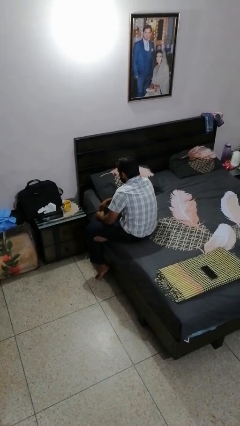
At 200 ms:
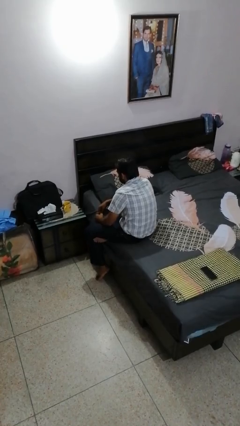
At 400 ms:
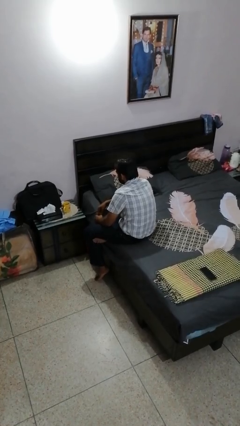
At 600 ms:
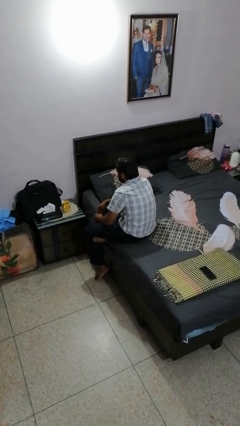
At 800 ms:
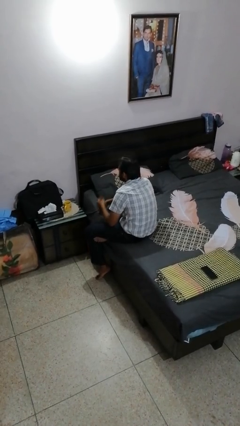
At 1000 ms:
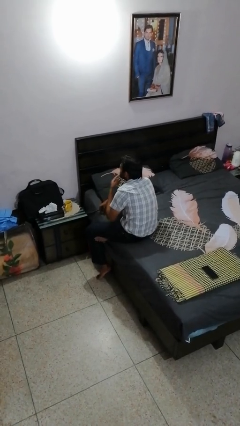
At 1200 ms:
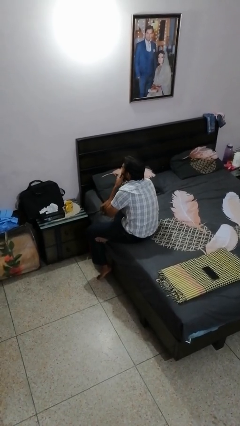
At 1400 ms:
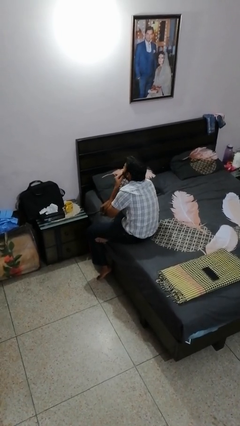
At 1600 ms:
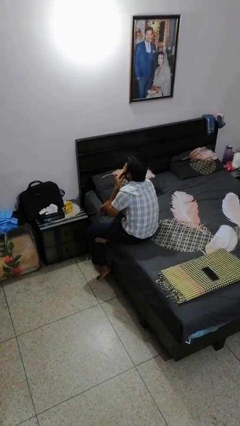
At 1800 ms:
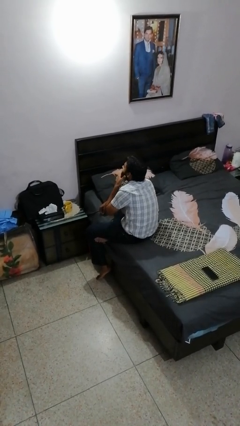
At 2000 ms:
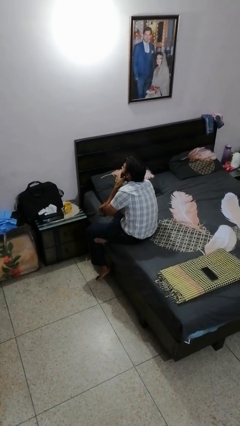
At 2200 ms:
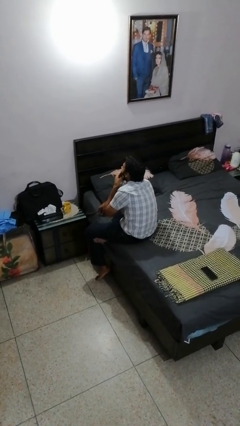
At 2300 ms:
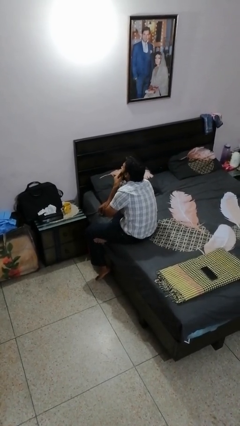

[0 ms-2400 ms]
person strokes chin

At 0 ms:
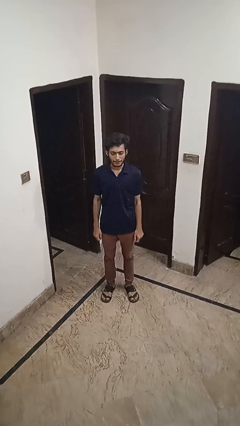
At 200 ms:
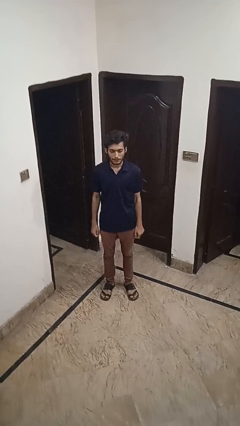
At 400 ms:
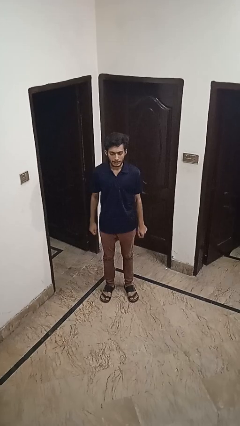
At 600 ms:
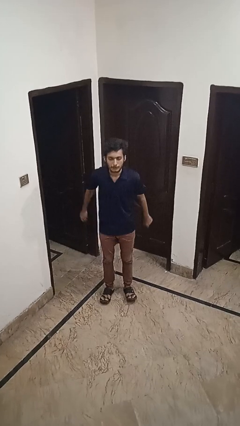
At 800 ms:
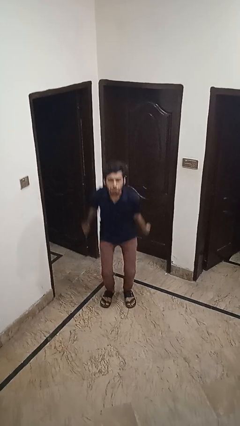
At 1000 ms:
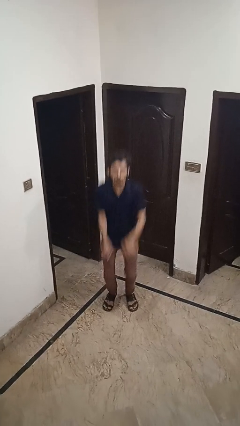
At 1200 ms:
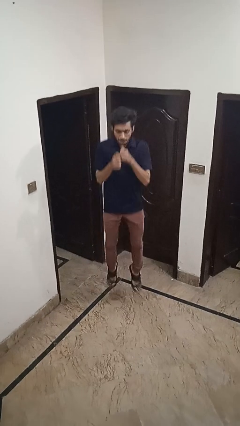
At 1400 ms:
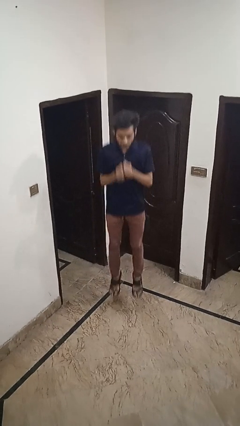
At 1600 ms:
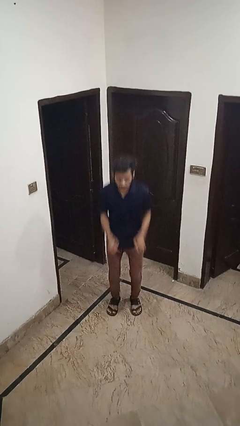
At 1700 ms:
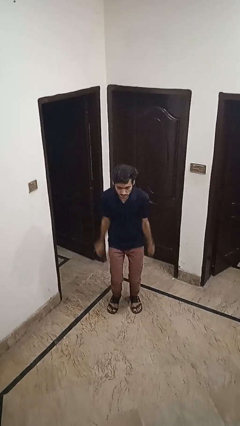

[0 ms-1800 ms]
person jumps

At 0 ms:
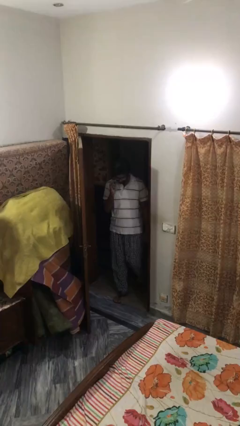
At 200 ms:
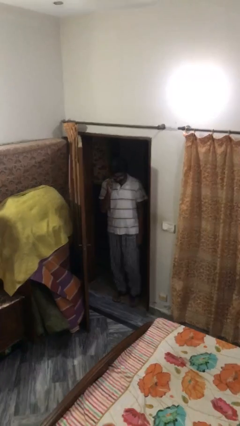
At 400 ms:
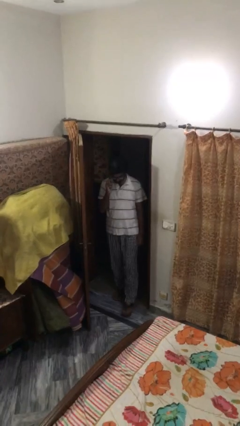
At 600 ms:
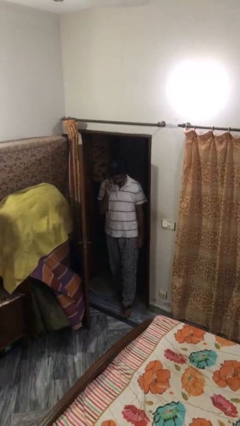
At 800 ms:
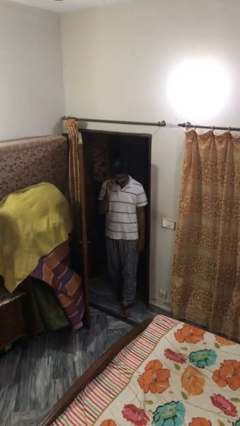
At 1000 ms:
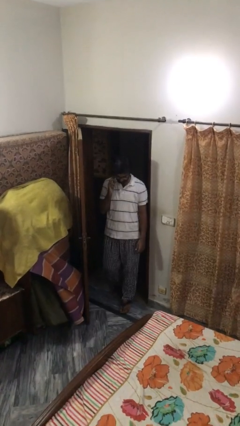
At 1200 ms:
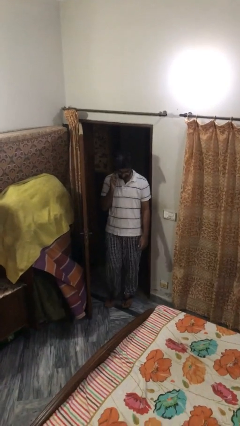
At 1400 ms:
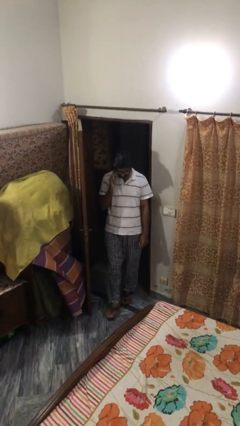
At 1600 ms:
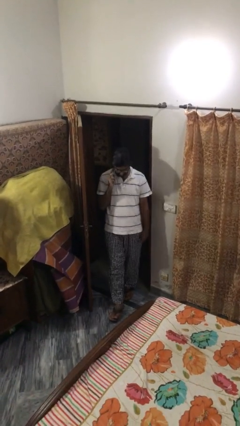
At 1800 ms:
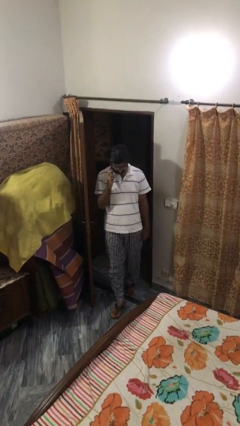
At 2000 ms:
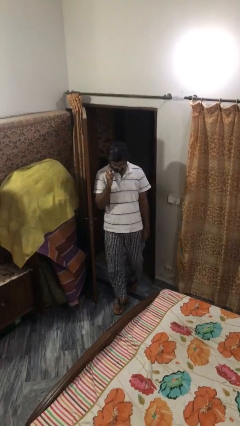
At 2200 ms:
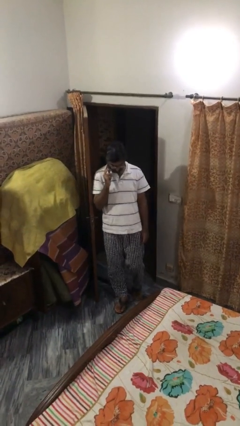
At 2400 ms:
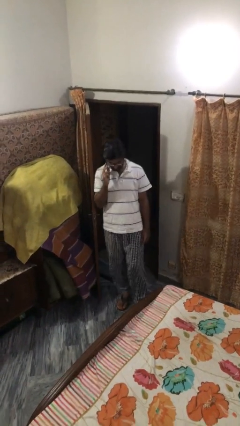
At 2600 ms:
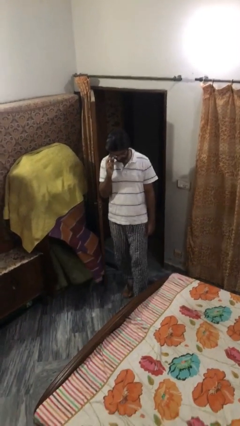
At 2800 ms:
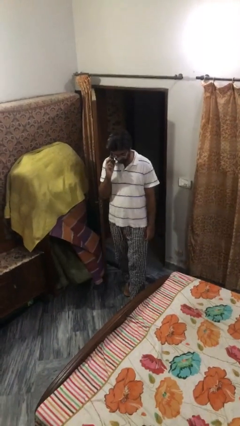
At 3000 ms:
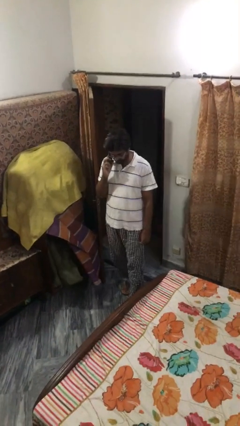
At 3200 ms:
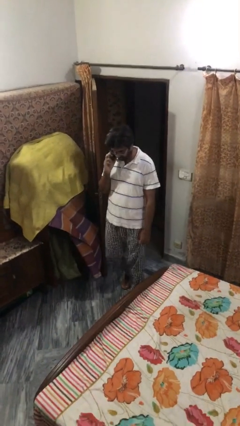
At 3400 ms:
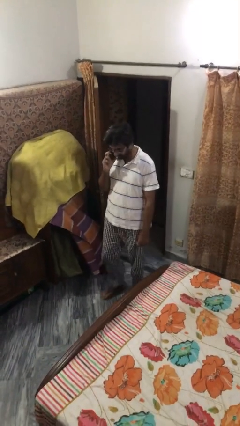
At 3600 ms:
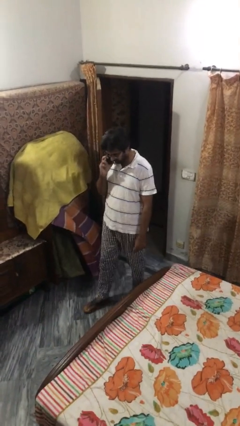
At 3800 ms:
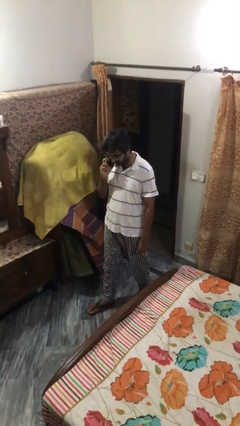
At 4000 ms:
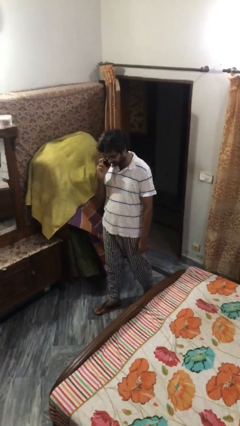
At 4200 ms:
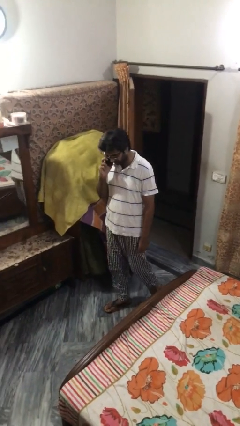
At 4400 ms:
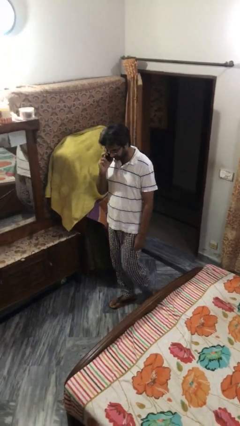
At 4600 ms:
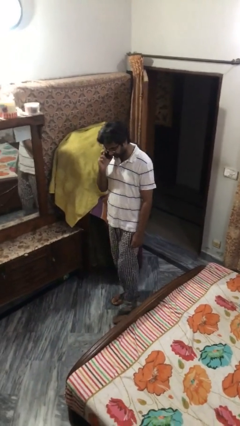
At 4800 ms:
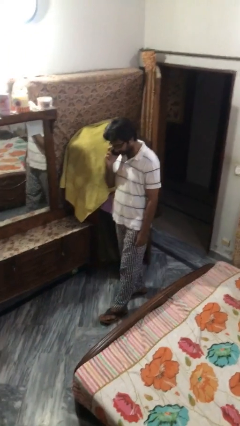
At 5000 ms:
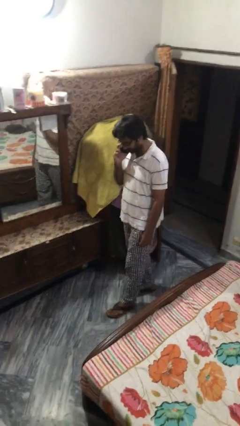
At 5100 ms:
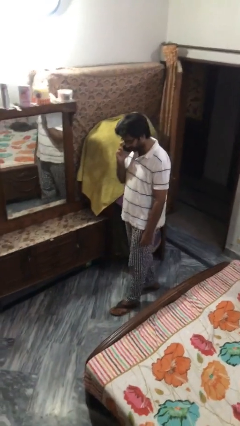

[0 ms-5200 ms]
person enters scene through structure

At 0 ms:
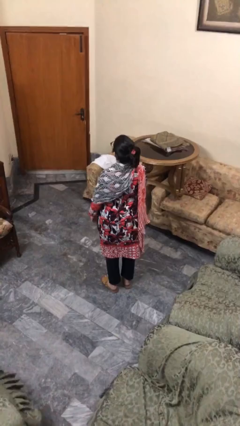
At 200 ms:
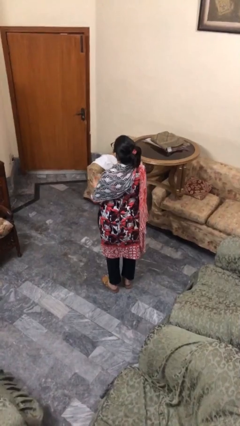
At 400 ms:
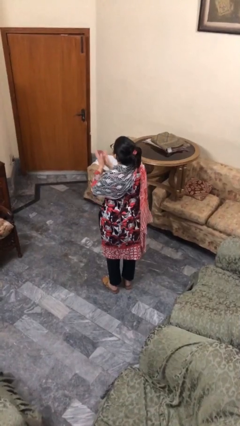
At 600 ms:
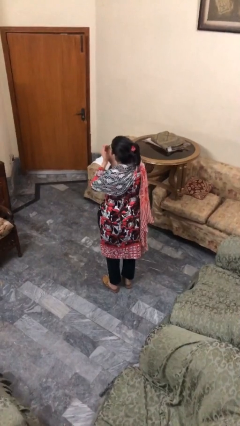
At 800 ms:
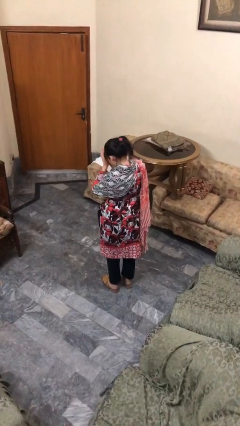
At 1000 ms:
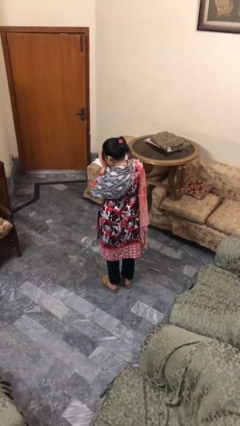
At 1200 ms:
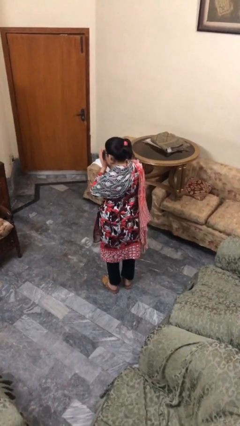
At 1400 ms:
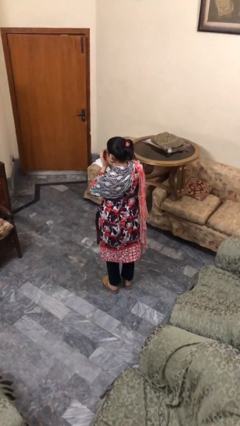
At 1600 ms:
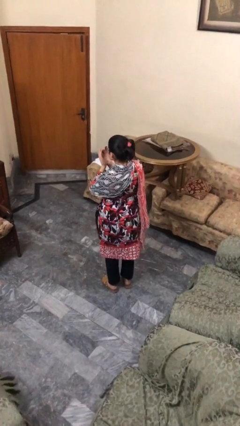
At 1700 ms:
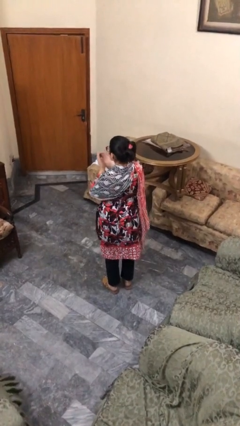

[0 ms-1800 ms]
person sneezes into hand

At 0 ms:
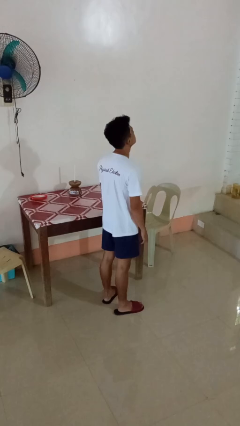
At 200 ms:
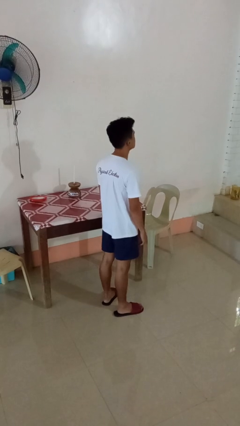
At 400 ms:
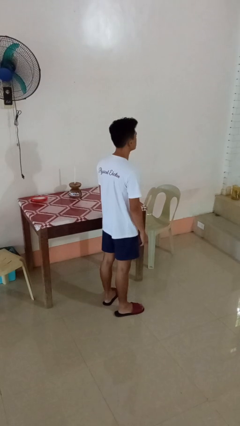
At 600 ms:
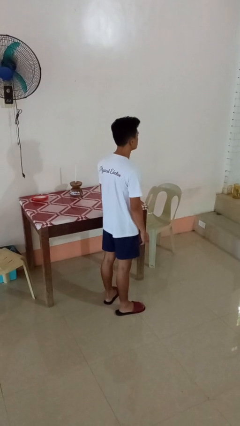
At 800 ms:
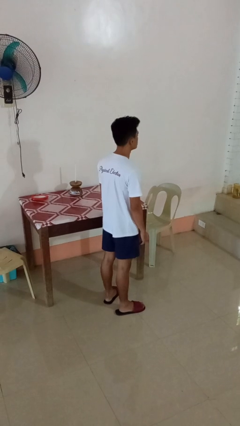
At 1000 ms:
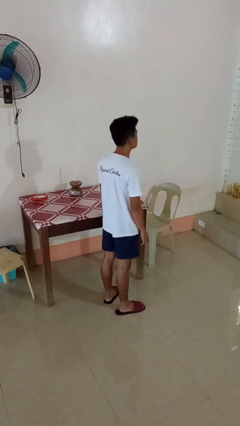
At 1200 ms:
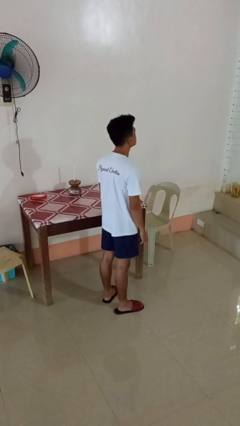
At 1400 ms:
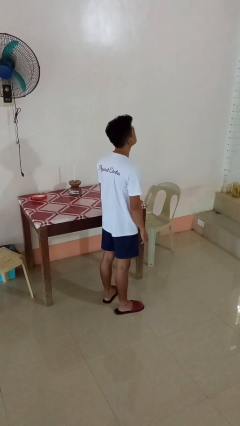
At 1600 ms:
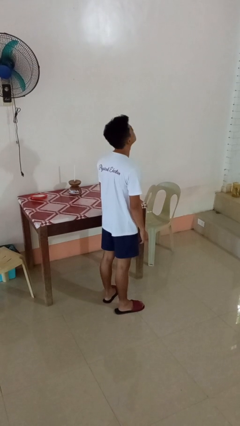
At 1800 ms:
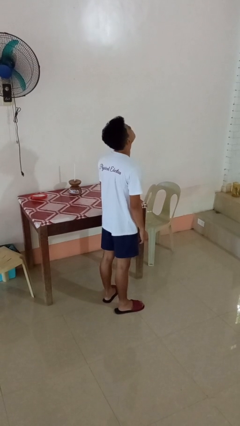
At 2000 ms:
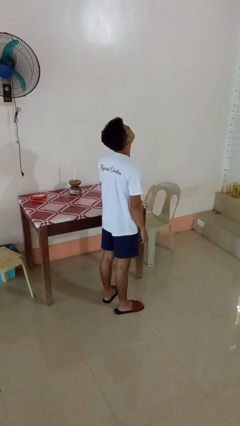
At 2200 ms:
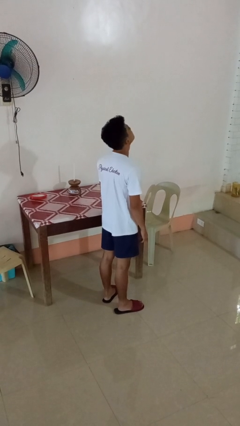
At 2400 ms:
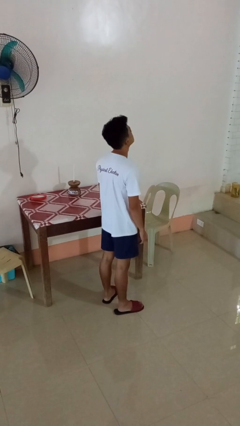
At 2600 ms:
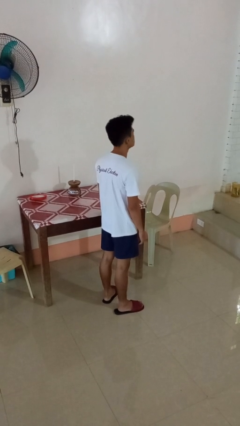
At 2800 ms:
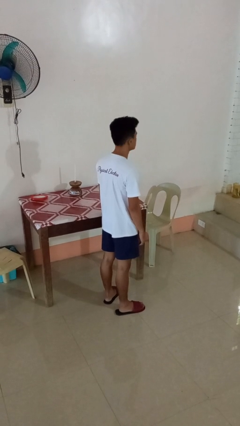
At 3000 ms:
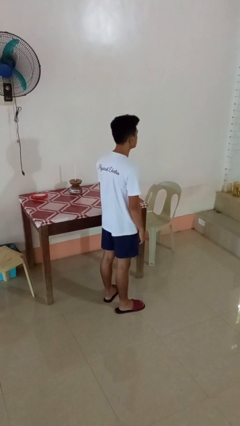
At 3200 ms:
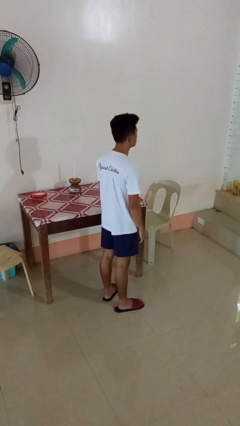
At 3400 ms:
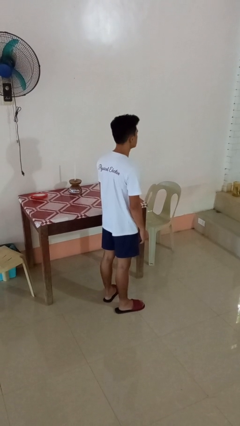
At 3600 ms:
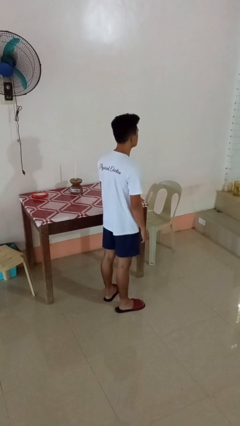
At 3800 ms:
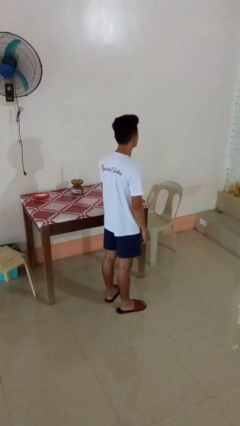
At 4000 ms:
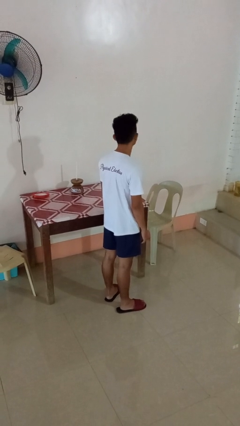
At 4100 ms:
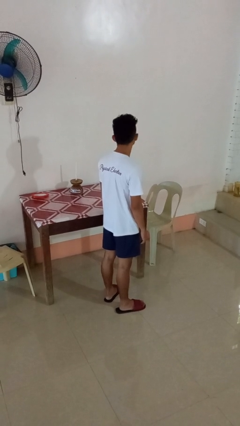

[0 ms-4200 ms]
person nods head

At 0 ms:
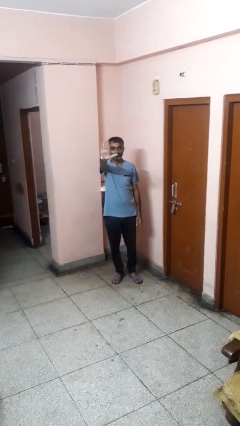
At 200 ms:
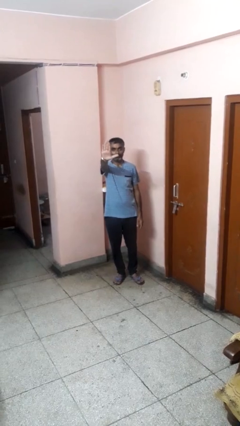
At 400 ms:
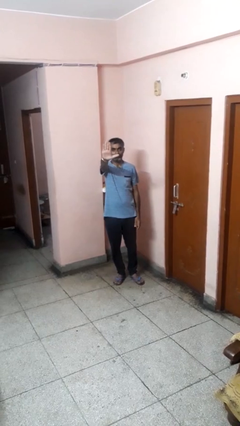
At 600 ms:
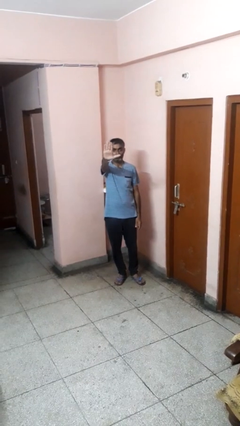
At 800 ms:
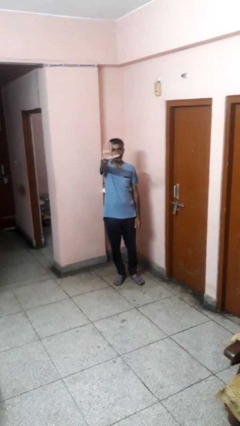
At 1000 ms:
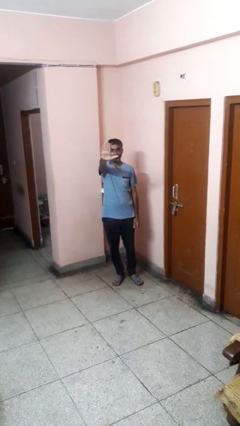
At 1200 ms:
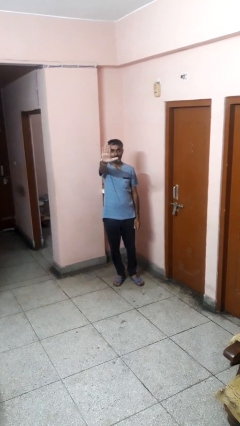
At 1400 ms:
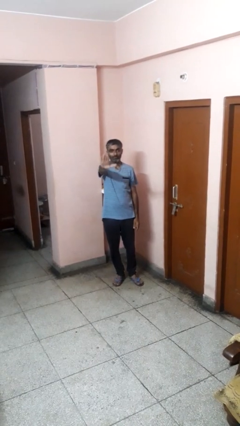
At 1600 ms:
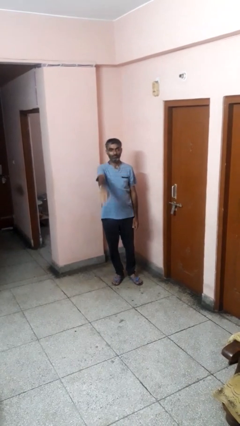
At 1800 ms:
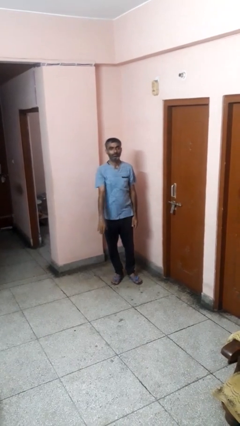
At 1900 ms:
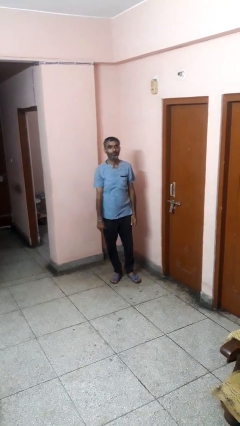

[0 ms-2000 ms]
person gestures stop

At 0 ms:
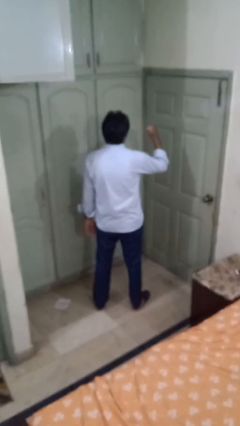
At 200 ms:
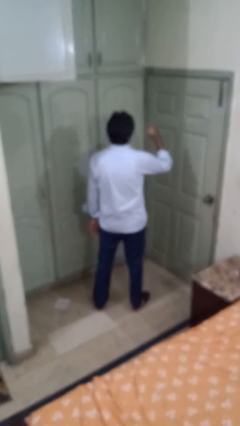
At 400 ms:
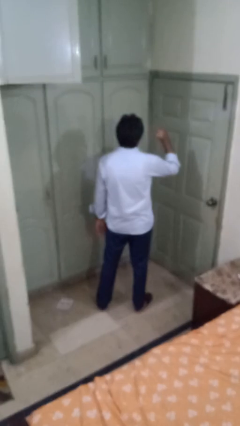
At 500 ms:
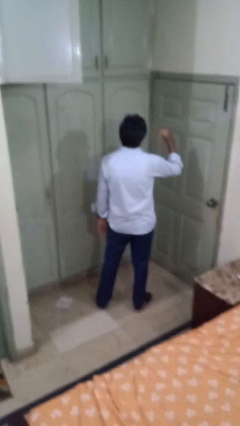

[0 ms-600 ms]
person gestures behind me
